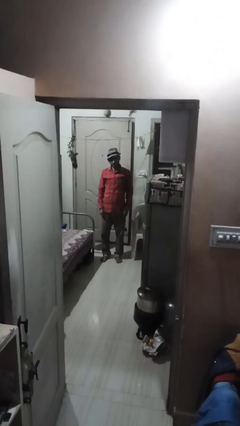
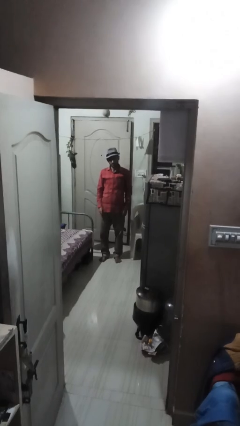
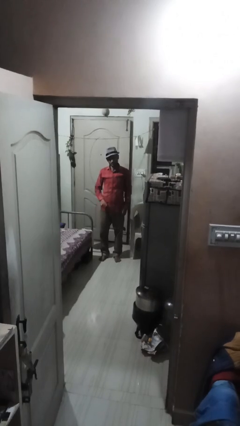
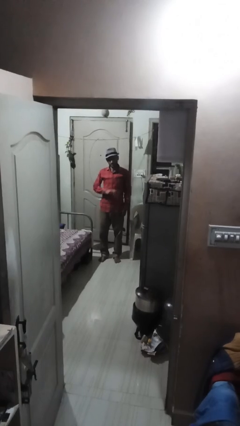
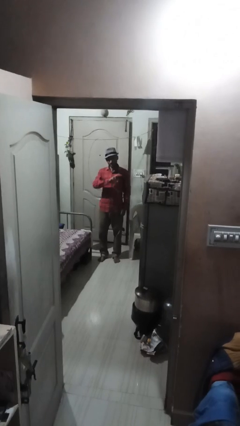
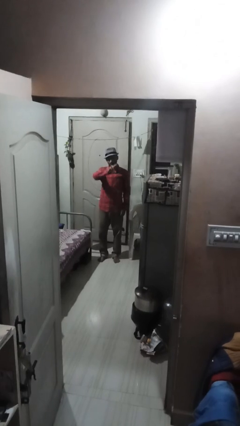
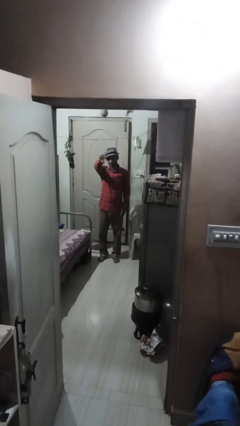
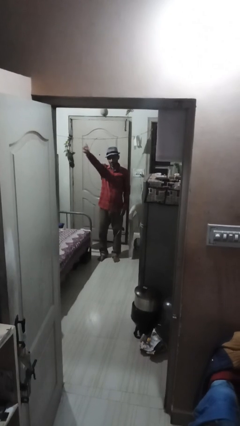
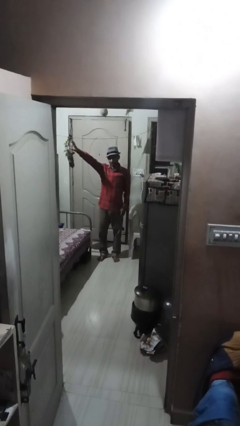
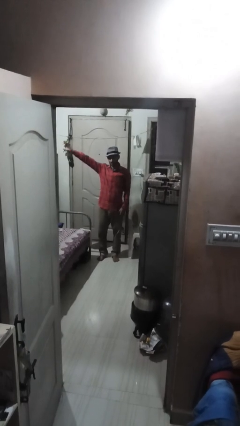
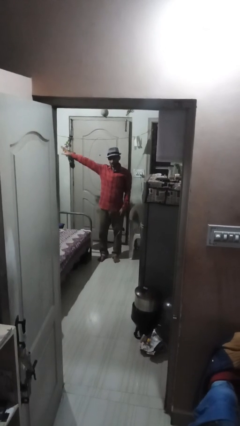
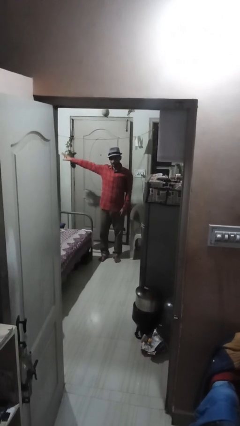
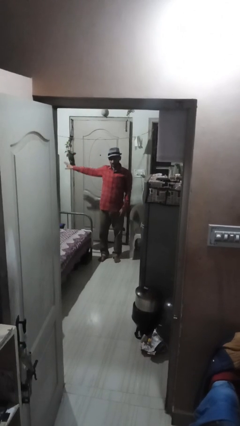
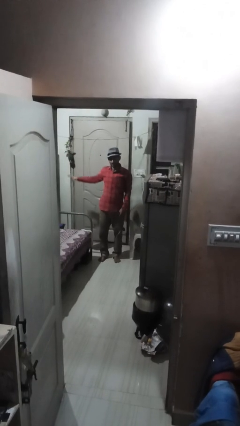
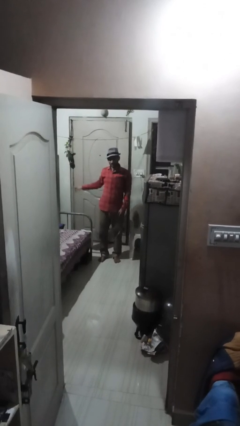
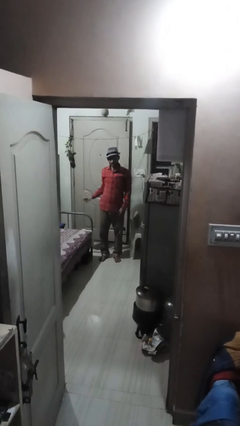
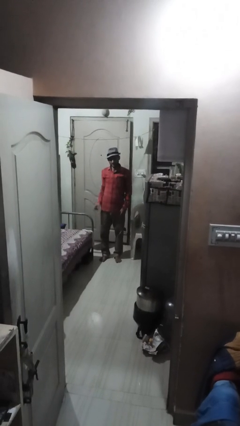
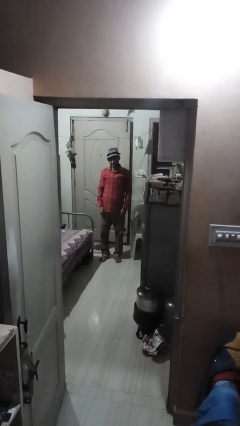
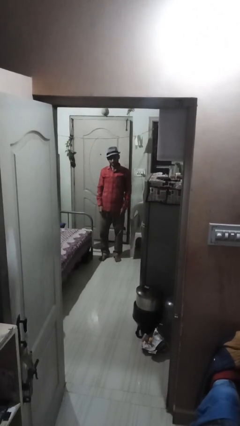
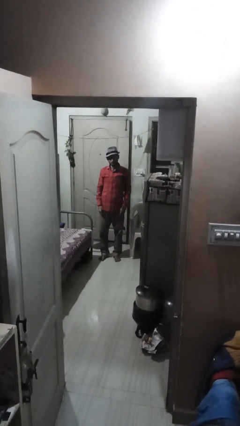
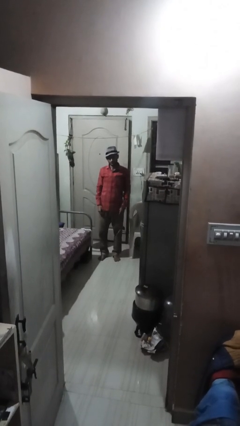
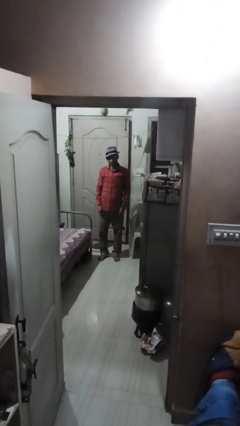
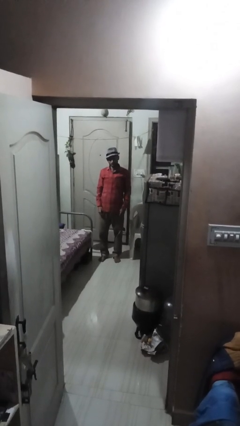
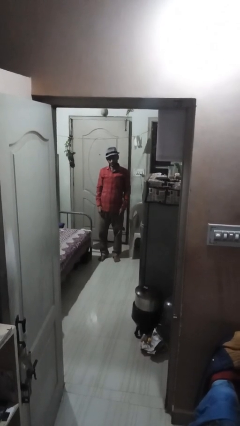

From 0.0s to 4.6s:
person gestures swipe right

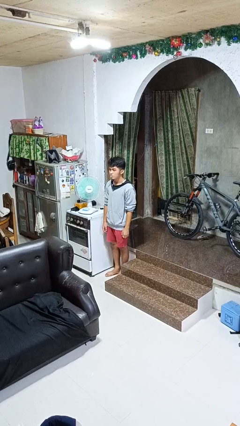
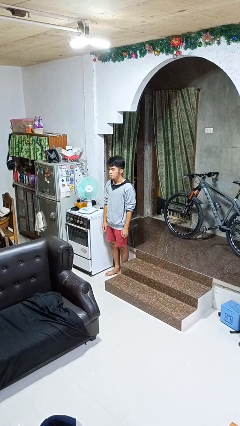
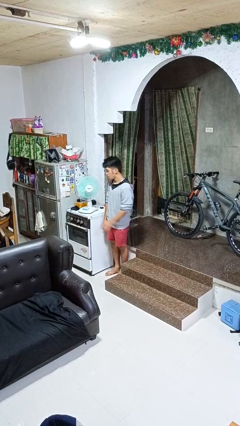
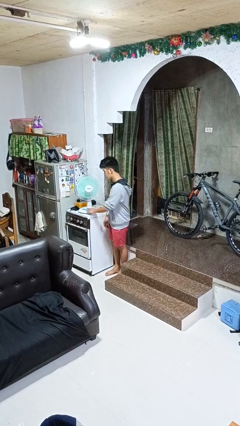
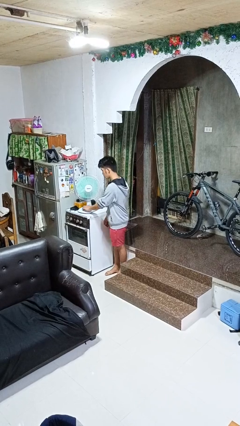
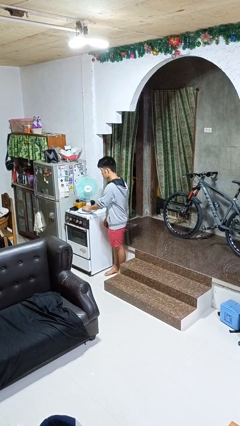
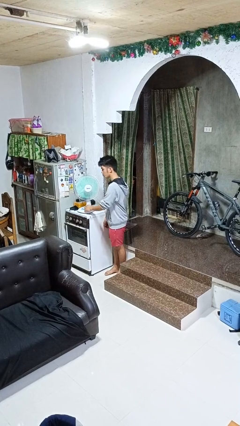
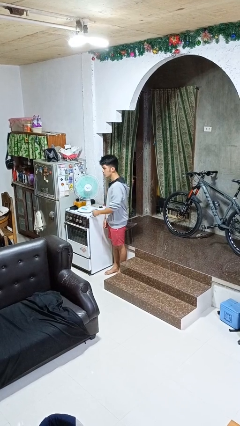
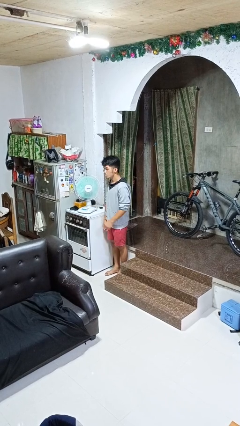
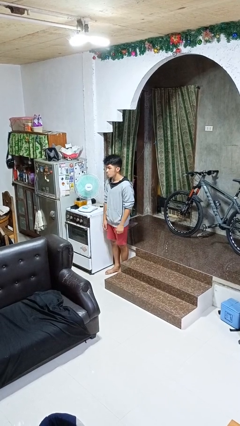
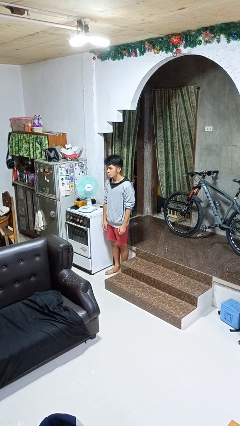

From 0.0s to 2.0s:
person turns off fan

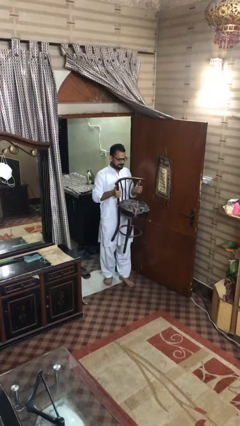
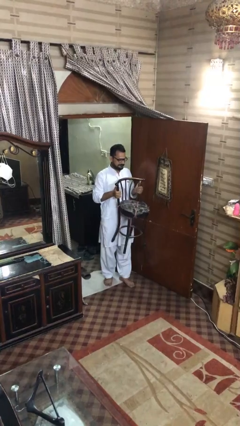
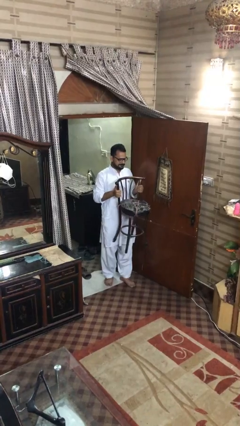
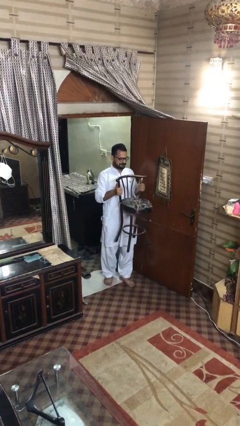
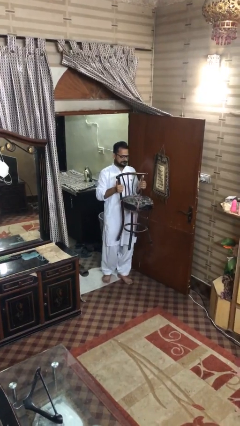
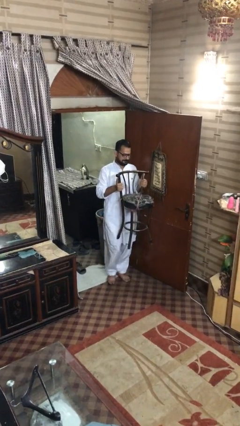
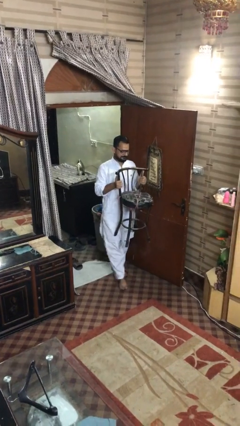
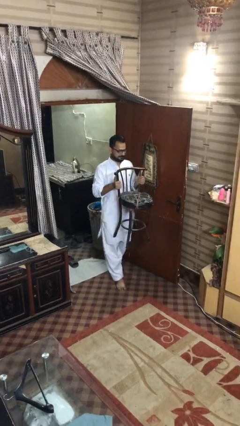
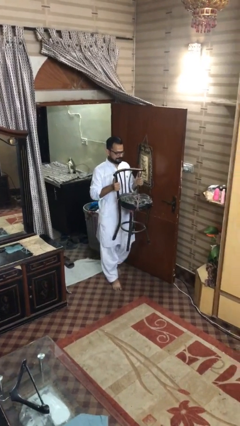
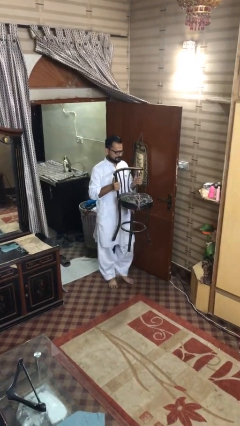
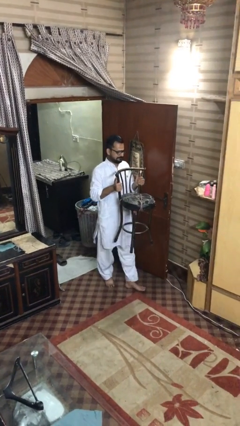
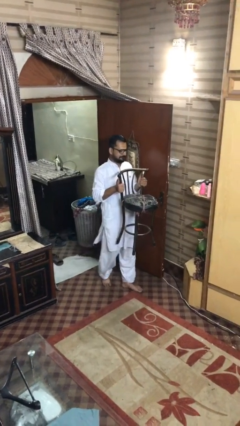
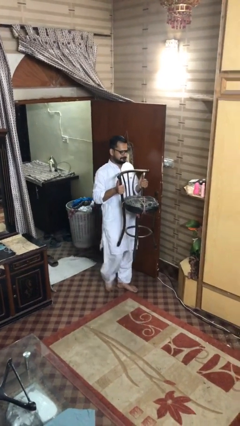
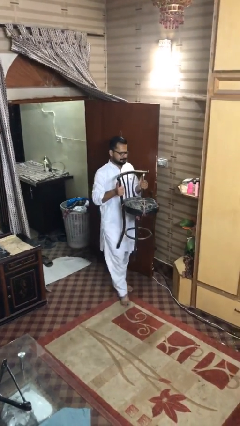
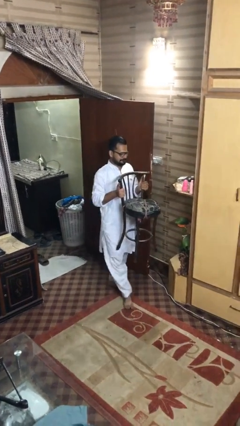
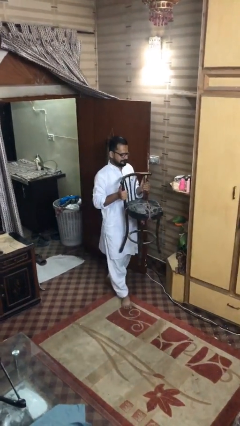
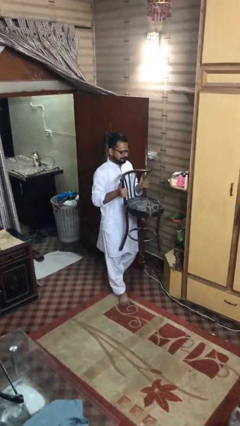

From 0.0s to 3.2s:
person carries heavy object

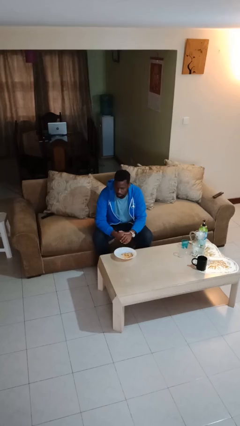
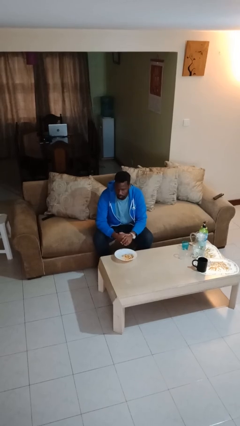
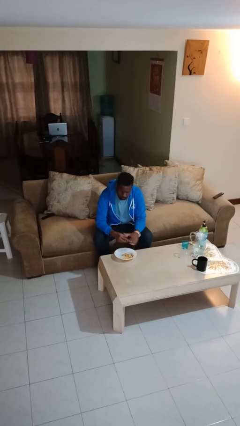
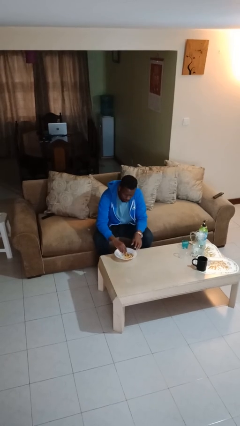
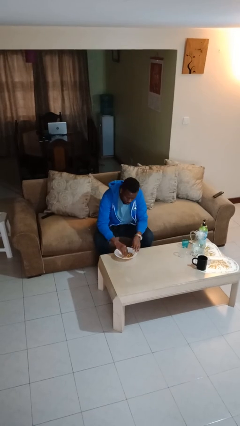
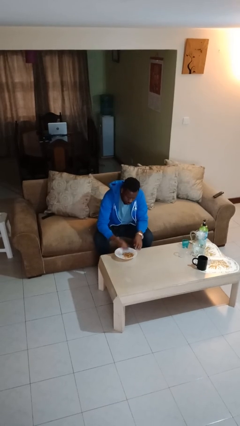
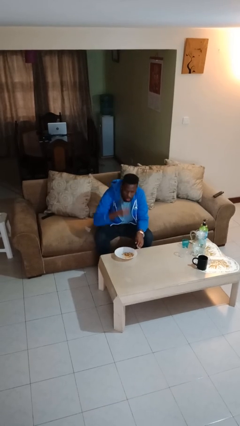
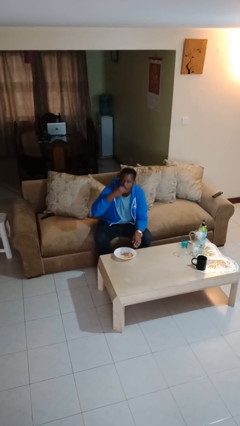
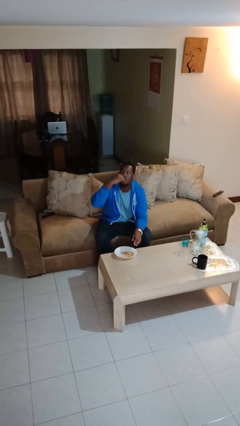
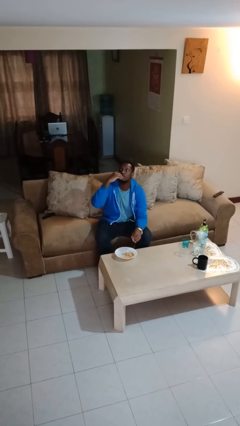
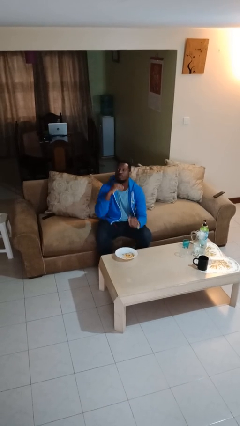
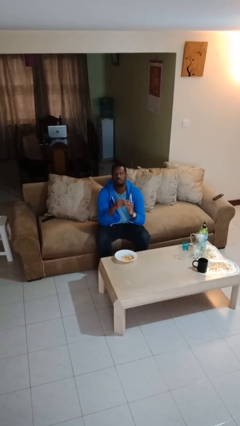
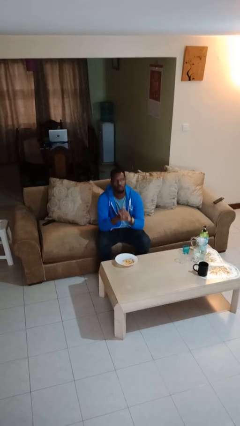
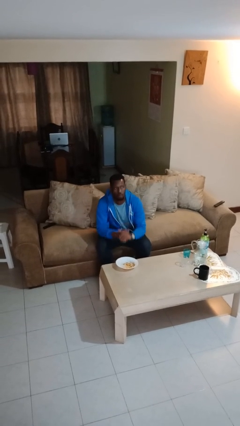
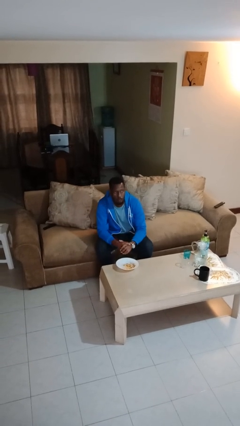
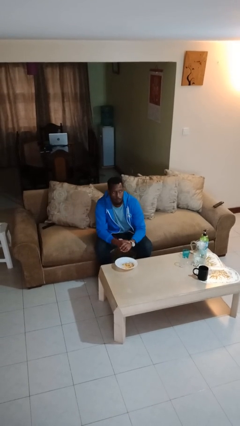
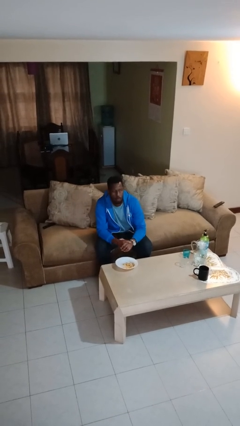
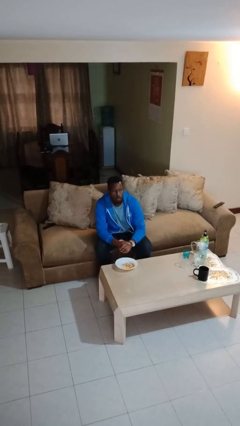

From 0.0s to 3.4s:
person eats with hands

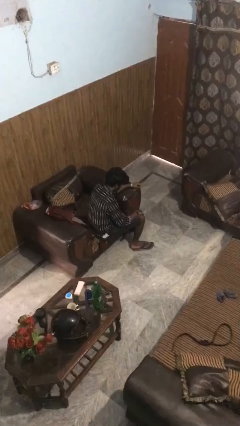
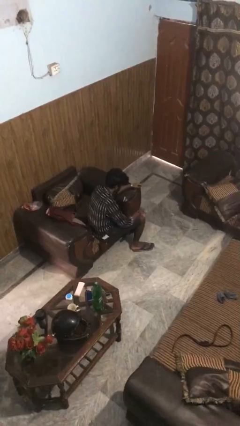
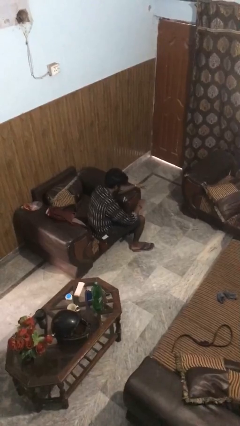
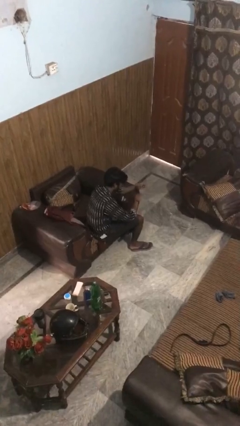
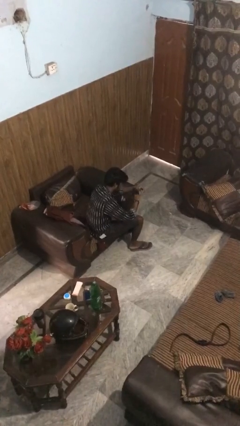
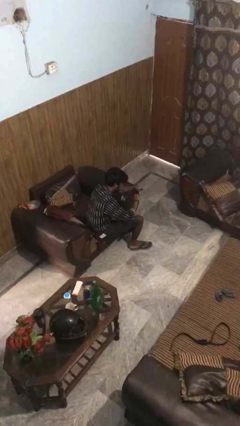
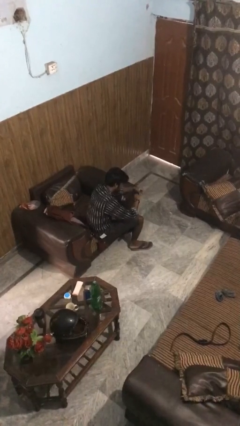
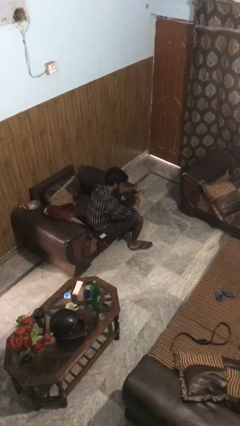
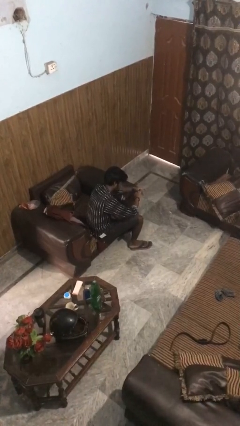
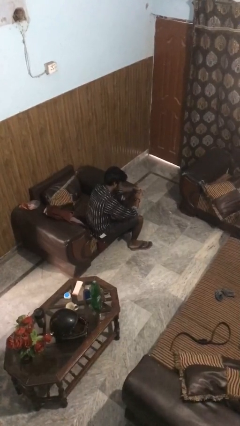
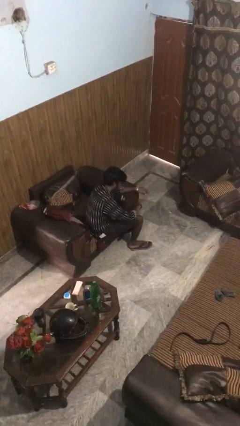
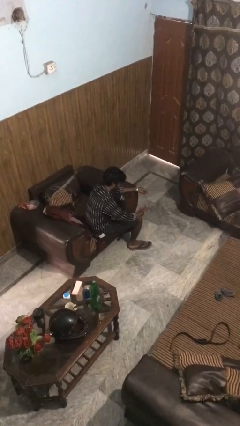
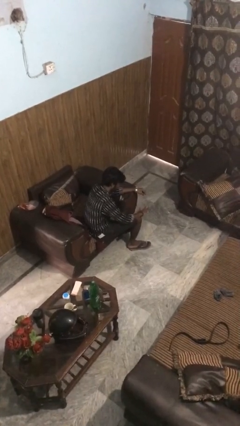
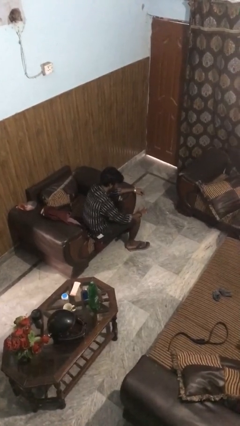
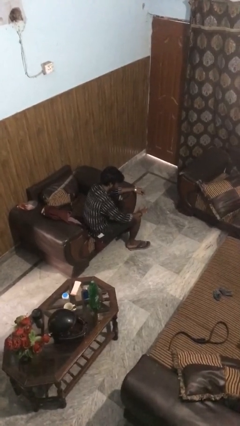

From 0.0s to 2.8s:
person puts on ring

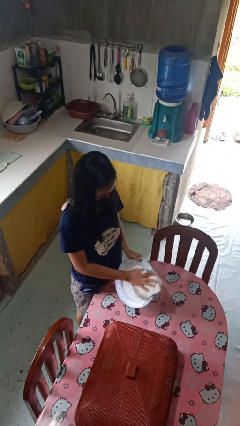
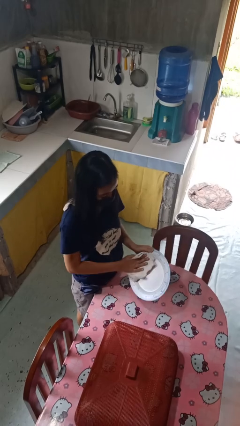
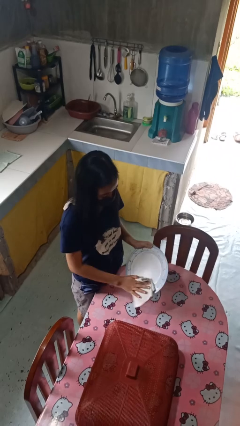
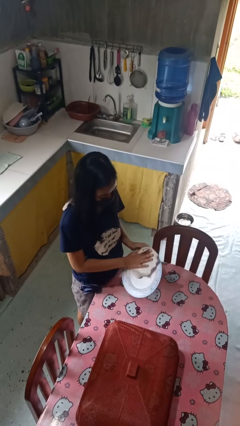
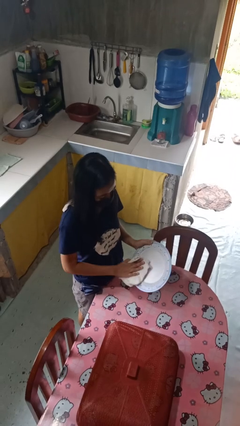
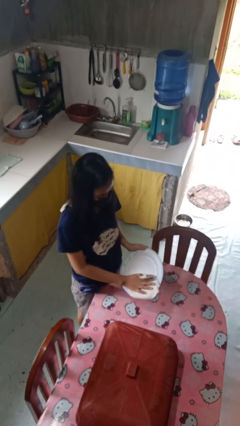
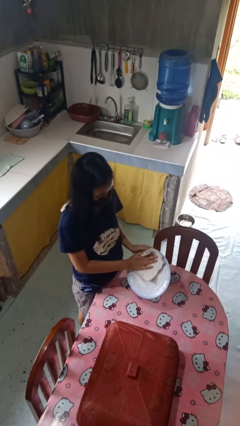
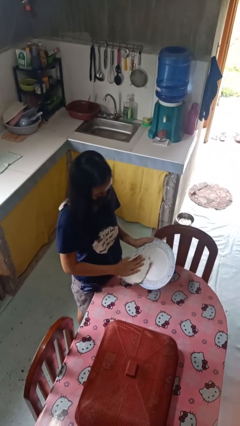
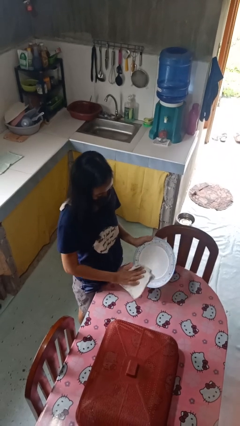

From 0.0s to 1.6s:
person dries dish
